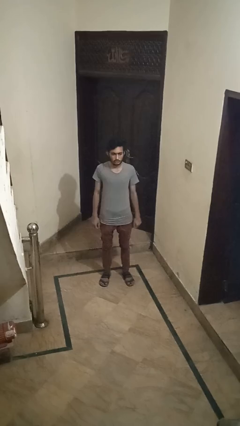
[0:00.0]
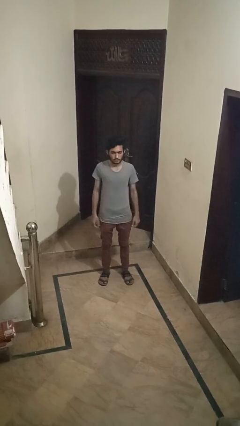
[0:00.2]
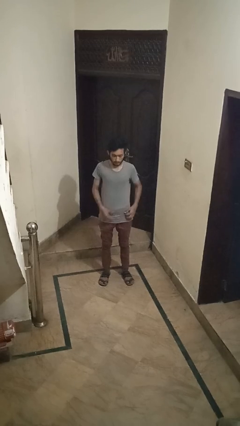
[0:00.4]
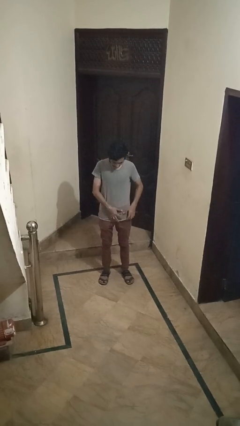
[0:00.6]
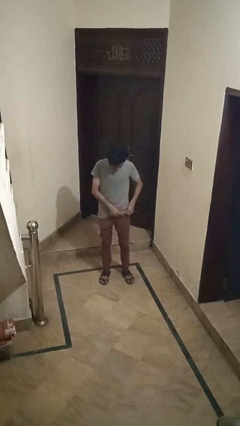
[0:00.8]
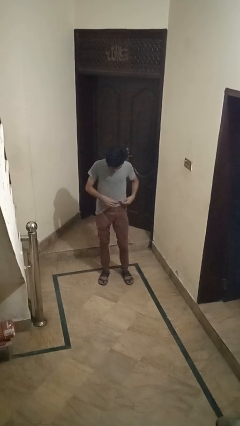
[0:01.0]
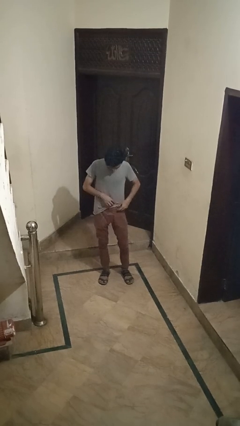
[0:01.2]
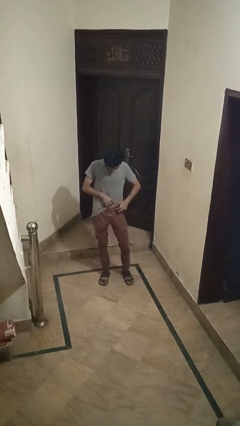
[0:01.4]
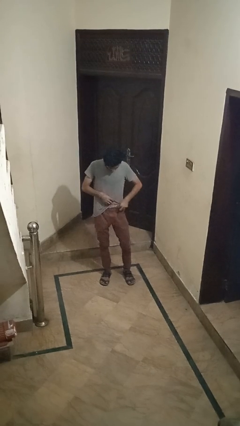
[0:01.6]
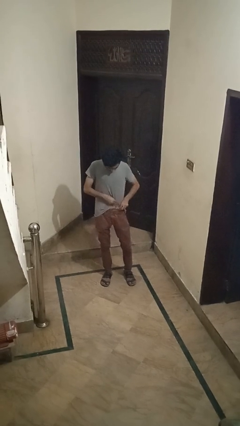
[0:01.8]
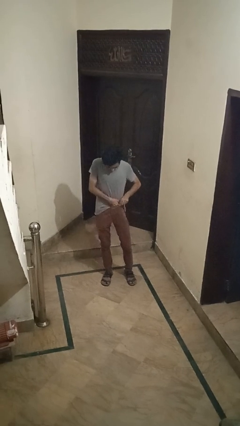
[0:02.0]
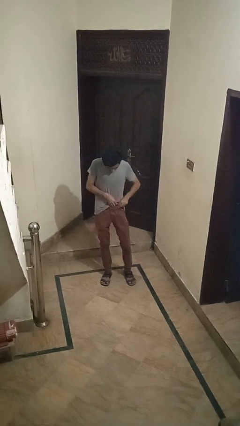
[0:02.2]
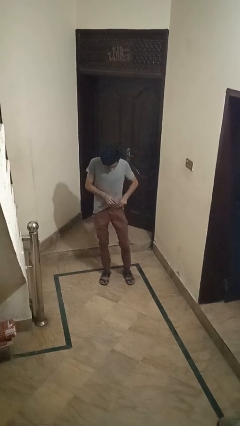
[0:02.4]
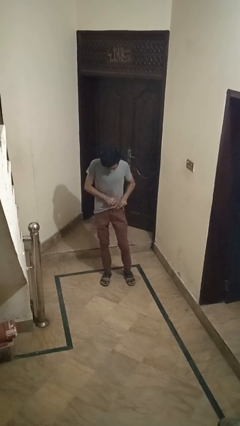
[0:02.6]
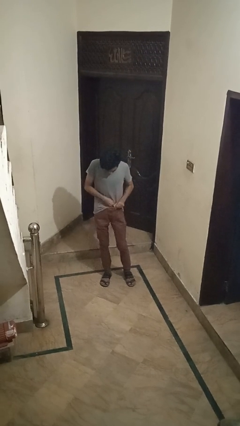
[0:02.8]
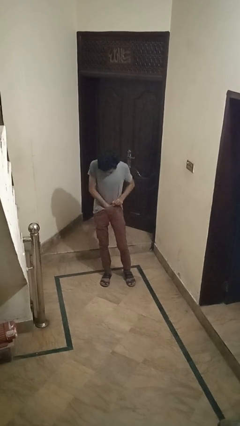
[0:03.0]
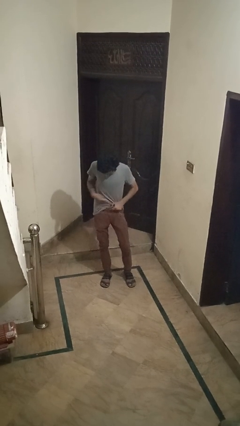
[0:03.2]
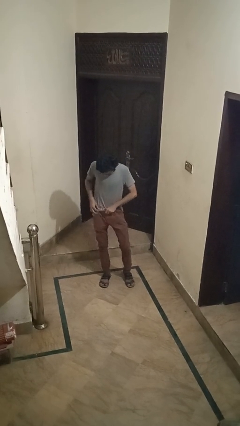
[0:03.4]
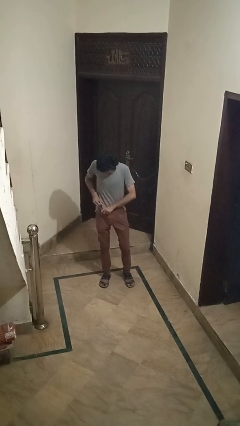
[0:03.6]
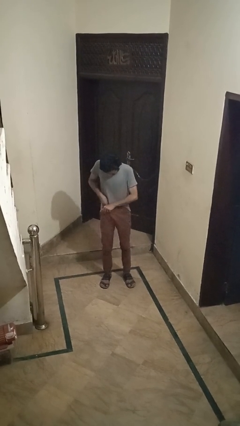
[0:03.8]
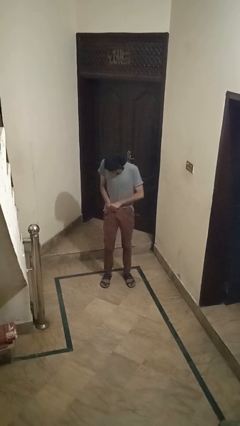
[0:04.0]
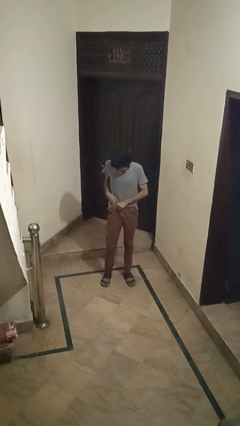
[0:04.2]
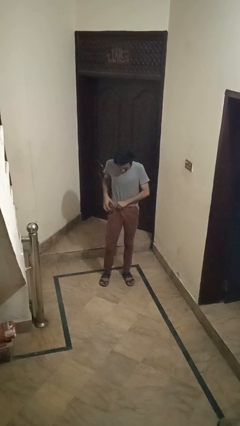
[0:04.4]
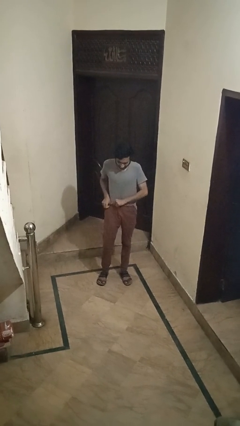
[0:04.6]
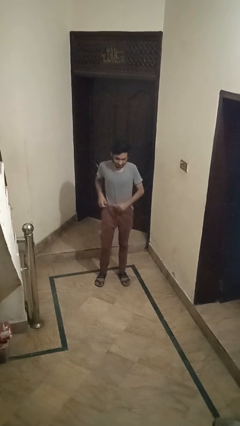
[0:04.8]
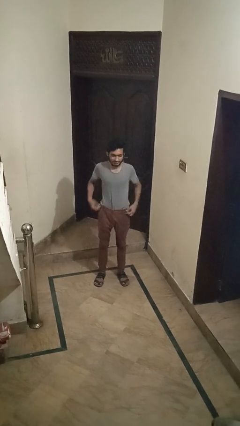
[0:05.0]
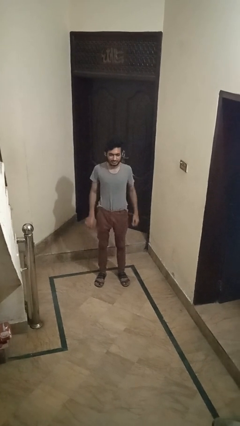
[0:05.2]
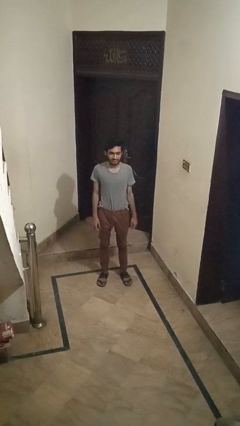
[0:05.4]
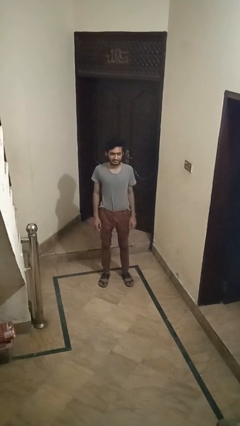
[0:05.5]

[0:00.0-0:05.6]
person tucks in shirt

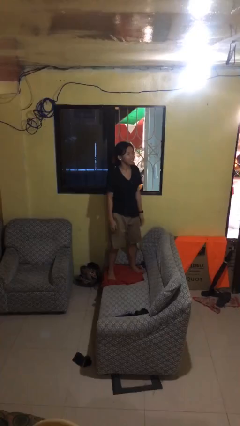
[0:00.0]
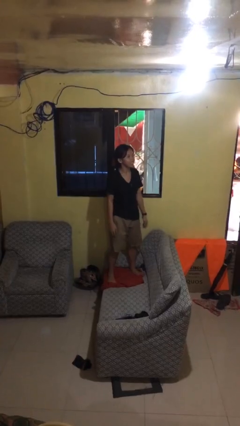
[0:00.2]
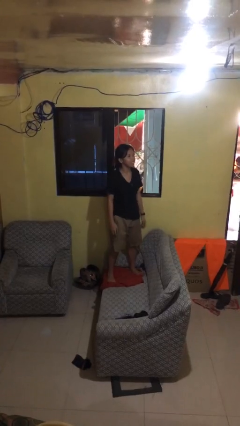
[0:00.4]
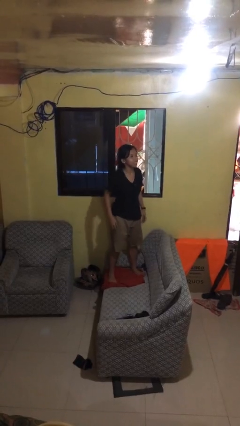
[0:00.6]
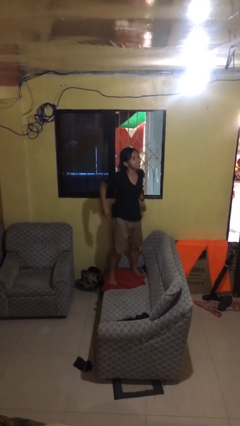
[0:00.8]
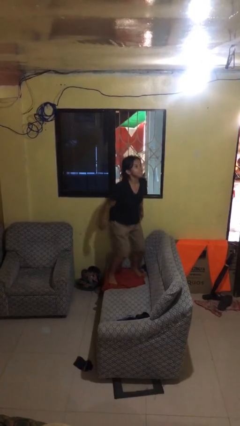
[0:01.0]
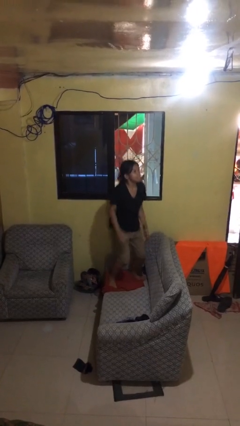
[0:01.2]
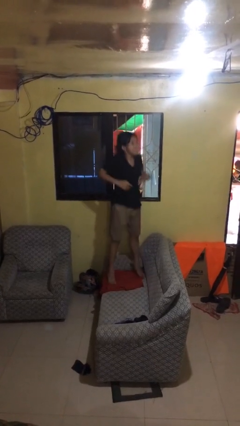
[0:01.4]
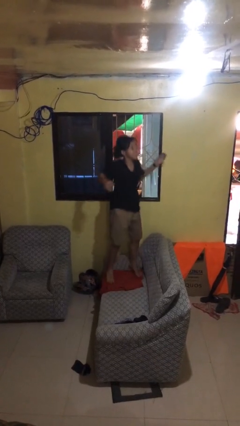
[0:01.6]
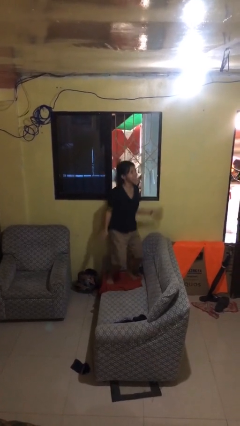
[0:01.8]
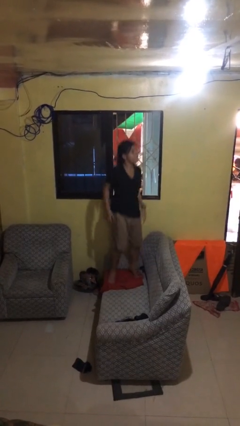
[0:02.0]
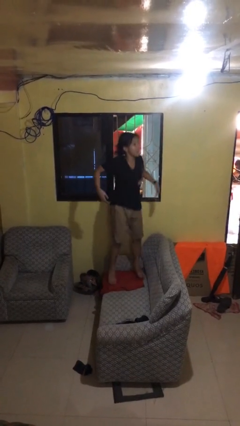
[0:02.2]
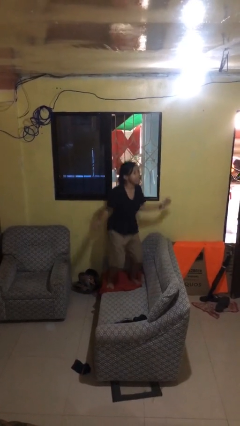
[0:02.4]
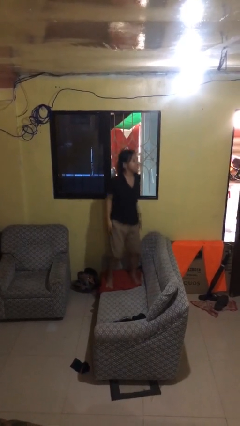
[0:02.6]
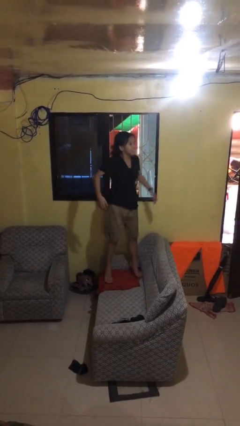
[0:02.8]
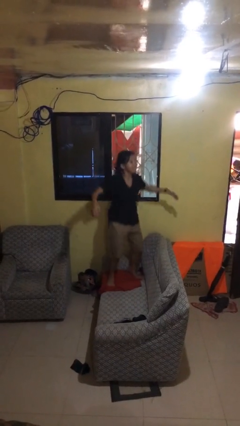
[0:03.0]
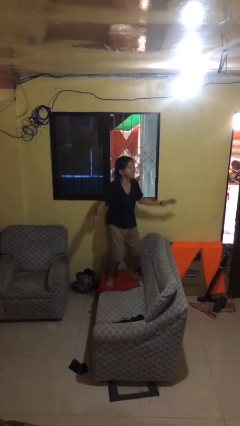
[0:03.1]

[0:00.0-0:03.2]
person jumps on couch

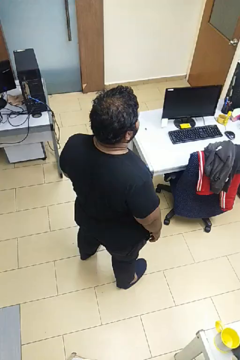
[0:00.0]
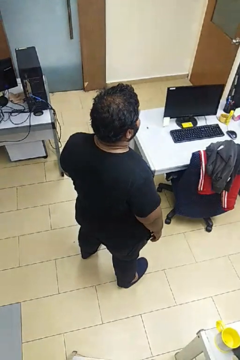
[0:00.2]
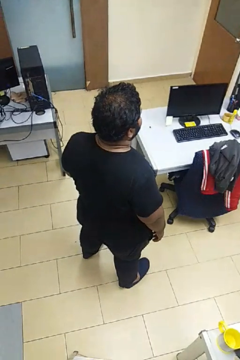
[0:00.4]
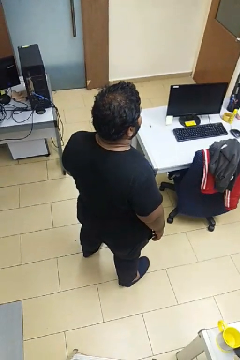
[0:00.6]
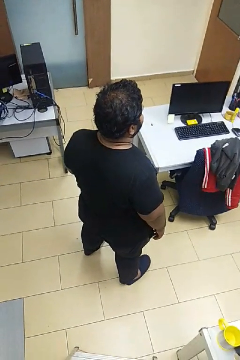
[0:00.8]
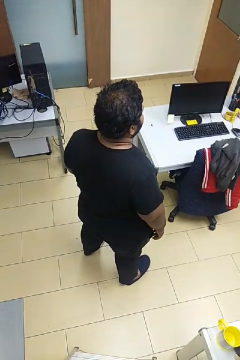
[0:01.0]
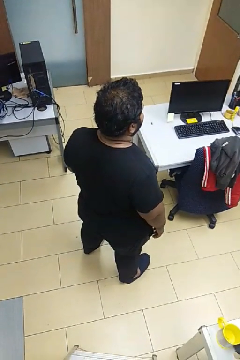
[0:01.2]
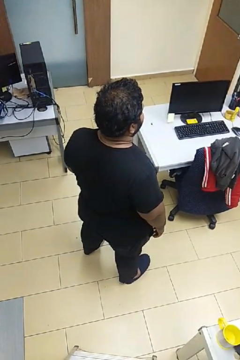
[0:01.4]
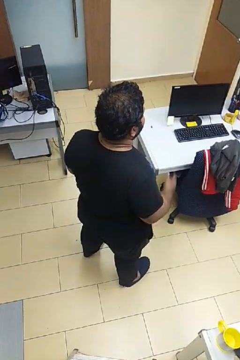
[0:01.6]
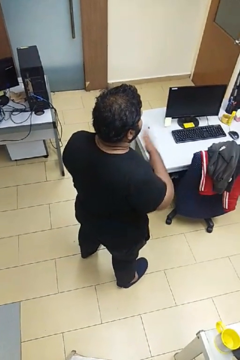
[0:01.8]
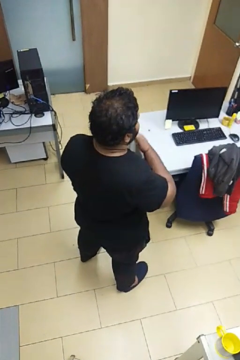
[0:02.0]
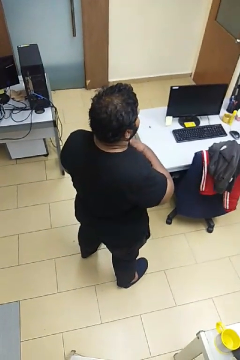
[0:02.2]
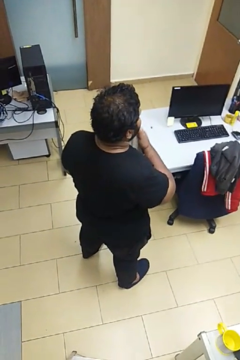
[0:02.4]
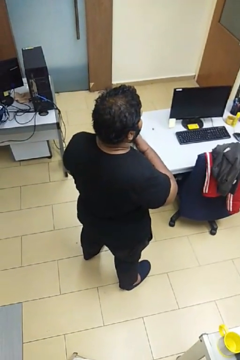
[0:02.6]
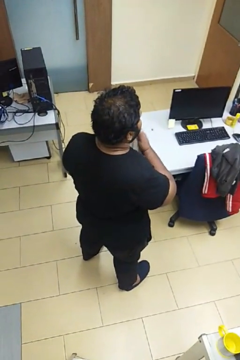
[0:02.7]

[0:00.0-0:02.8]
person drums on chest

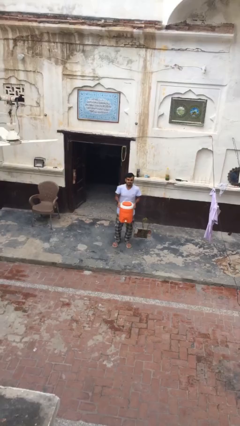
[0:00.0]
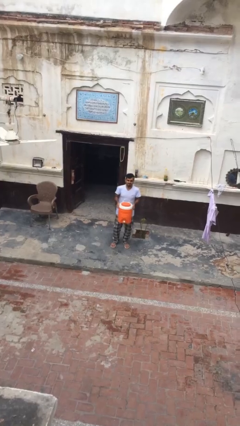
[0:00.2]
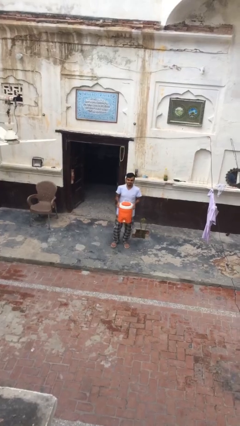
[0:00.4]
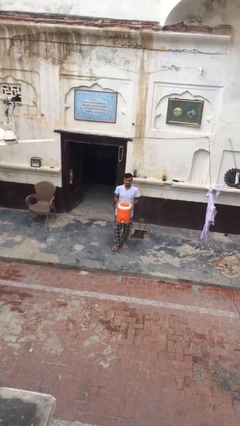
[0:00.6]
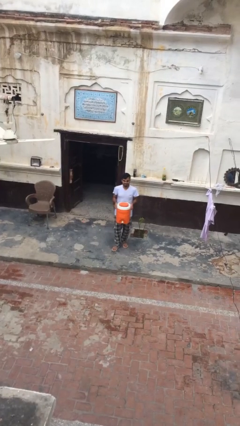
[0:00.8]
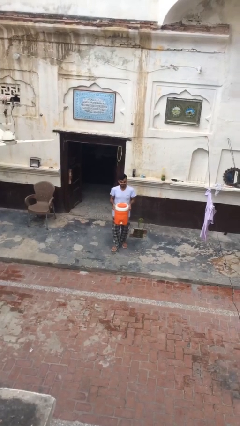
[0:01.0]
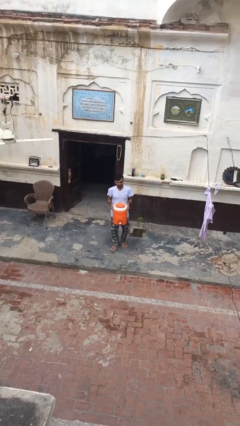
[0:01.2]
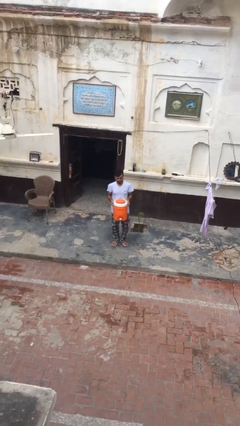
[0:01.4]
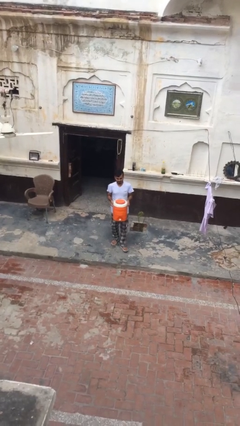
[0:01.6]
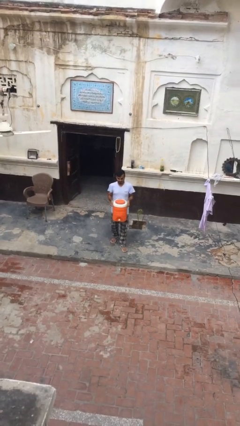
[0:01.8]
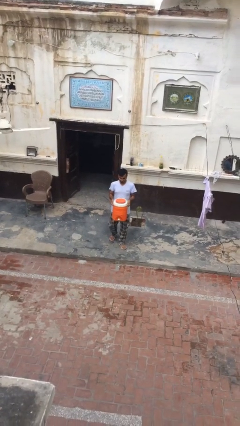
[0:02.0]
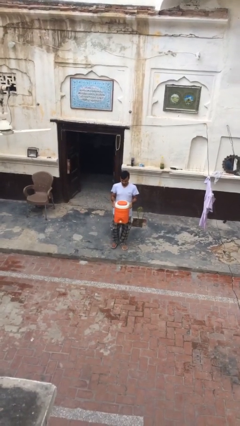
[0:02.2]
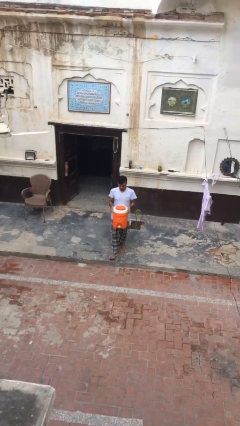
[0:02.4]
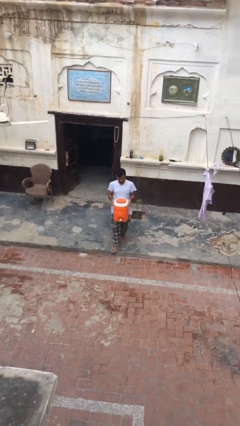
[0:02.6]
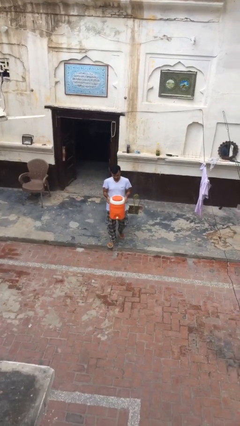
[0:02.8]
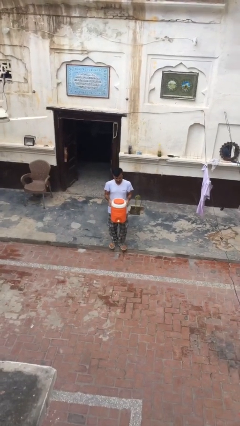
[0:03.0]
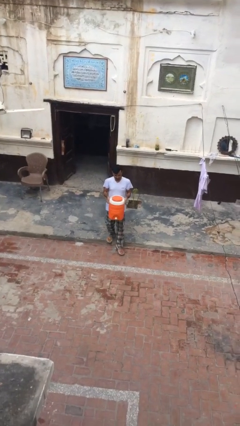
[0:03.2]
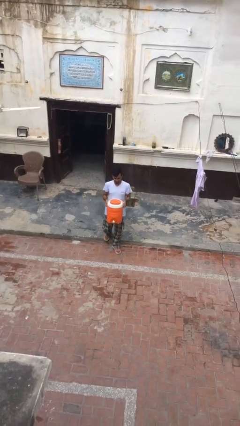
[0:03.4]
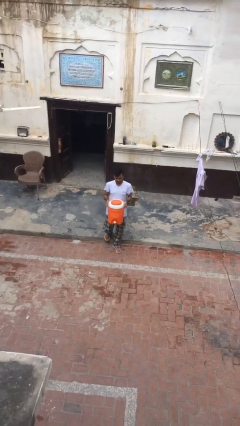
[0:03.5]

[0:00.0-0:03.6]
person carries heavy object

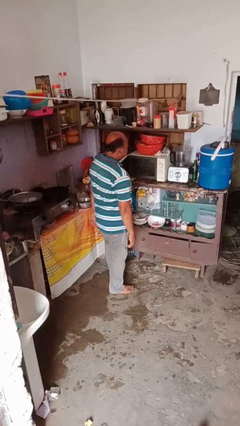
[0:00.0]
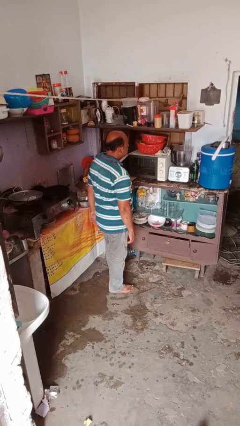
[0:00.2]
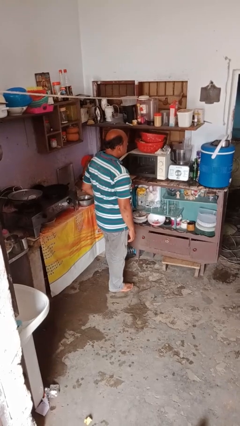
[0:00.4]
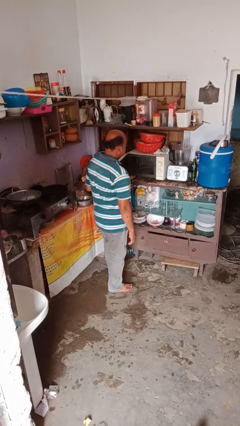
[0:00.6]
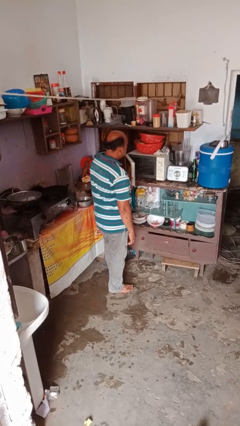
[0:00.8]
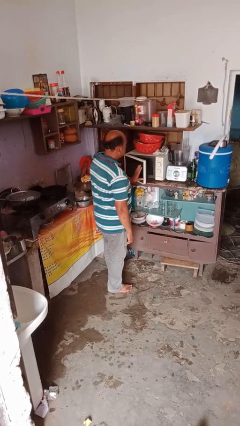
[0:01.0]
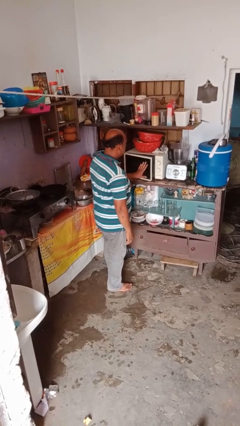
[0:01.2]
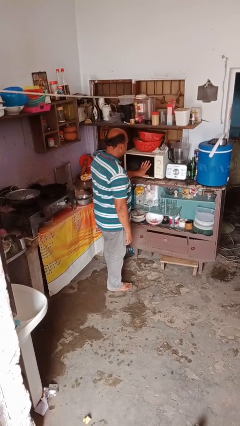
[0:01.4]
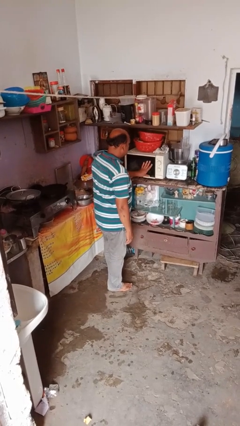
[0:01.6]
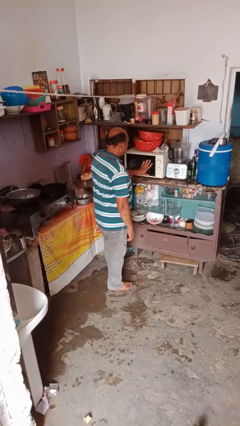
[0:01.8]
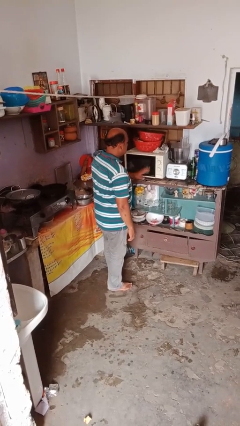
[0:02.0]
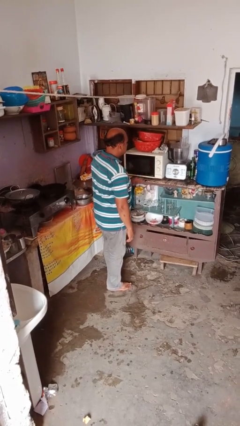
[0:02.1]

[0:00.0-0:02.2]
person closes microwave

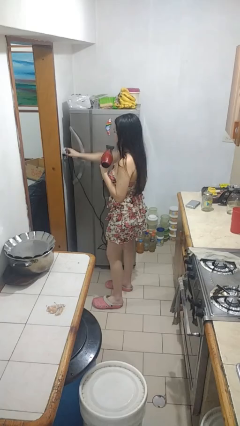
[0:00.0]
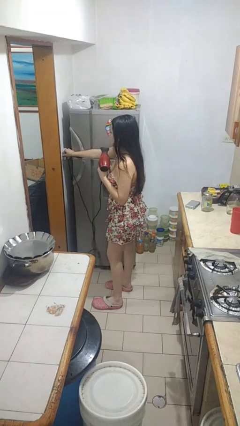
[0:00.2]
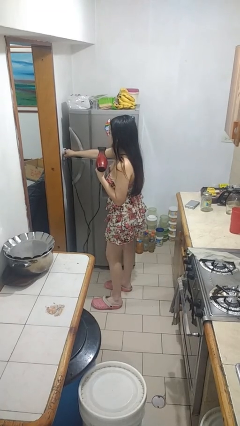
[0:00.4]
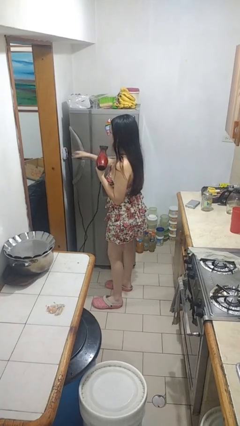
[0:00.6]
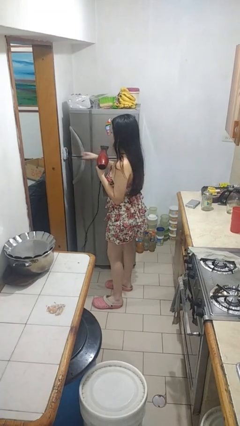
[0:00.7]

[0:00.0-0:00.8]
person unplugs from electrical socket
